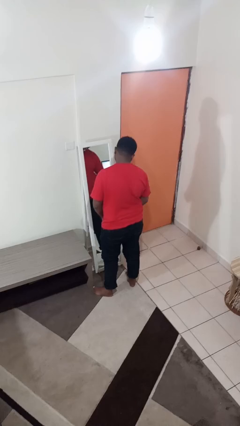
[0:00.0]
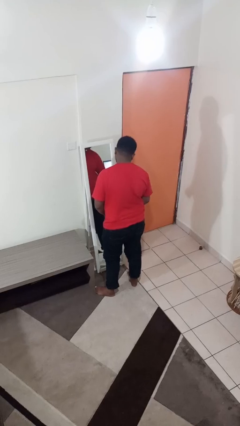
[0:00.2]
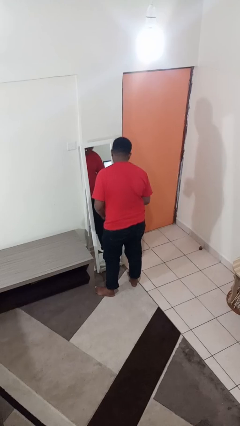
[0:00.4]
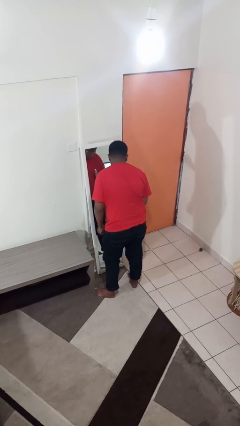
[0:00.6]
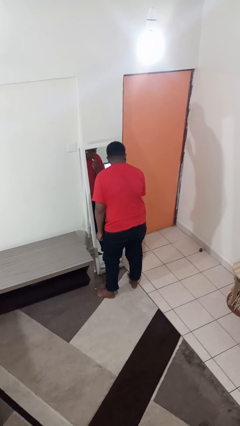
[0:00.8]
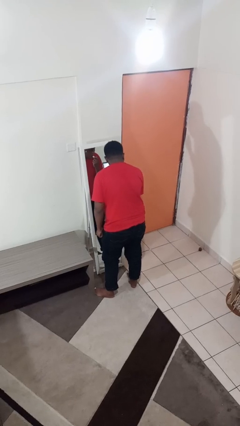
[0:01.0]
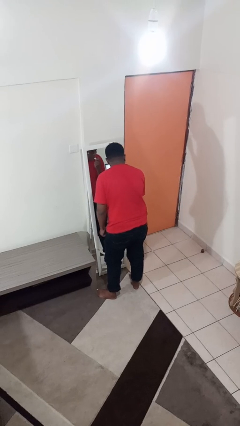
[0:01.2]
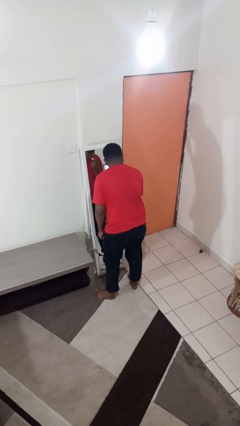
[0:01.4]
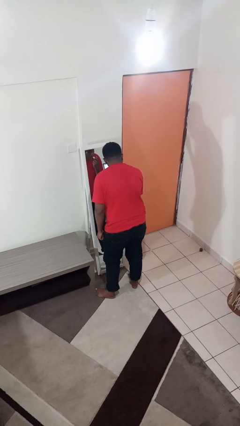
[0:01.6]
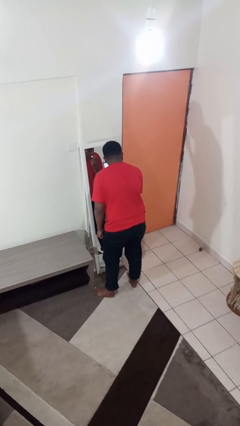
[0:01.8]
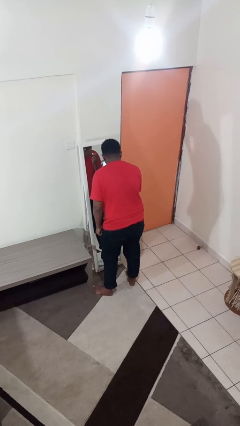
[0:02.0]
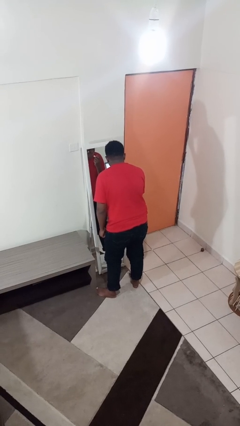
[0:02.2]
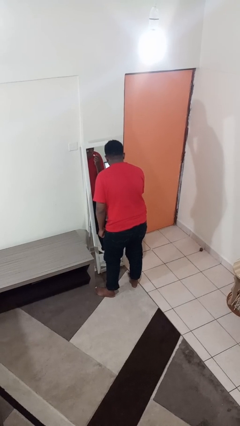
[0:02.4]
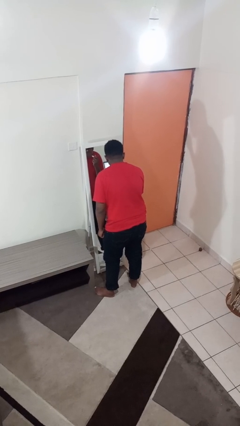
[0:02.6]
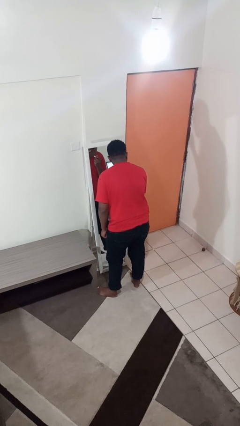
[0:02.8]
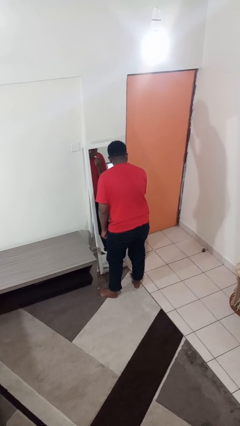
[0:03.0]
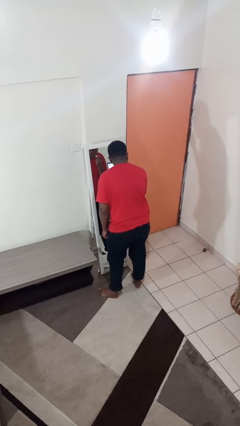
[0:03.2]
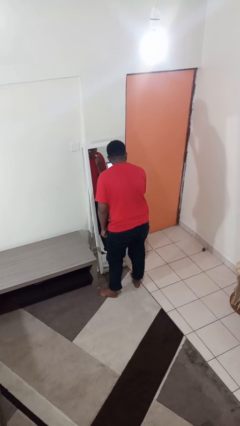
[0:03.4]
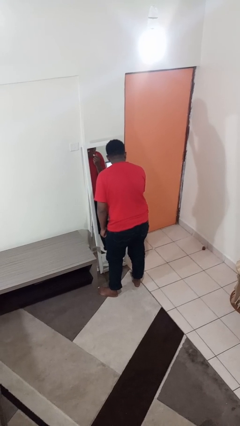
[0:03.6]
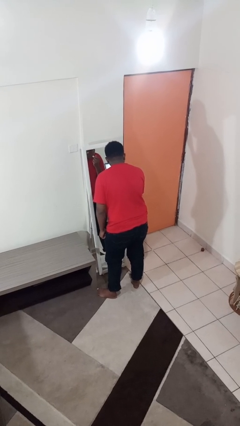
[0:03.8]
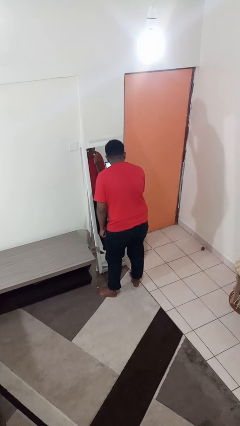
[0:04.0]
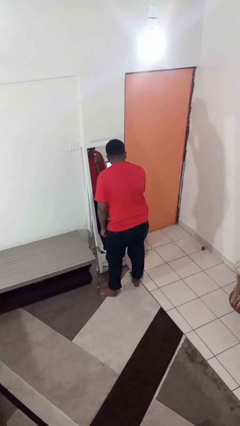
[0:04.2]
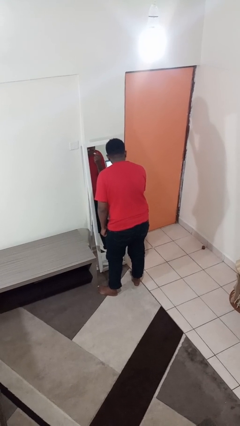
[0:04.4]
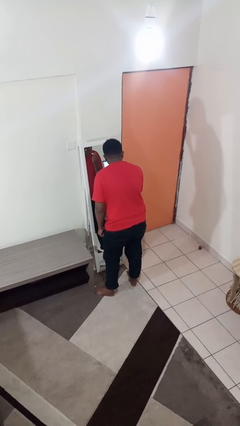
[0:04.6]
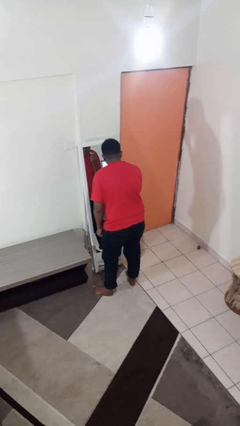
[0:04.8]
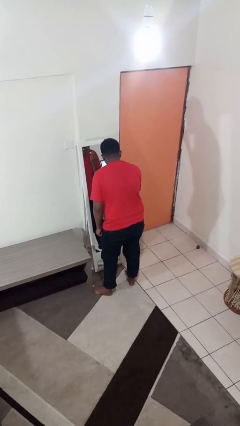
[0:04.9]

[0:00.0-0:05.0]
person applies lip makeup

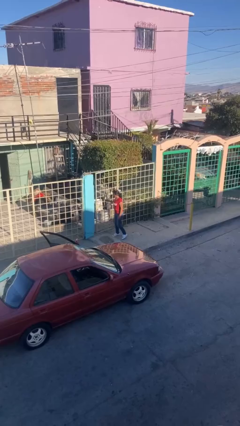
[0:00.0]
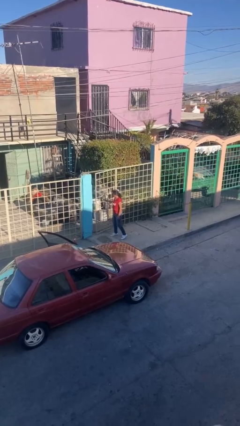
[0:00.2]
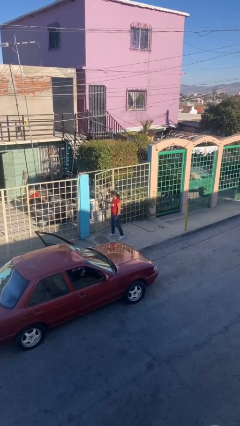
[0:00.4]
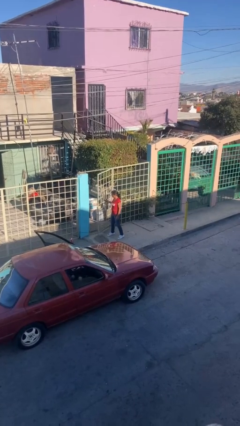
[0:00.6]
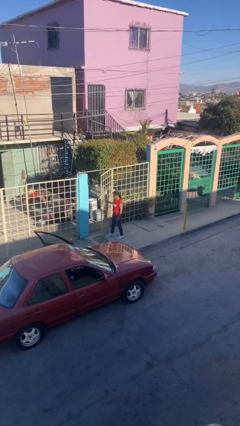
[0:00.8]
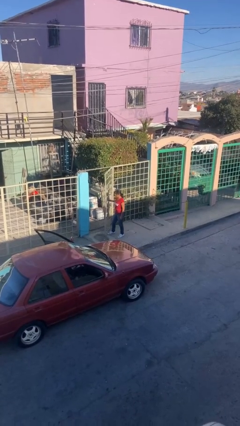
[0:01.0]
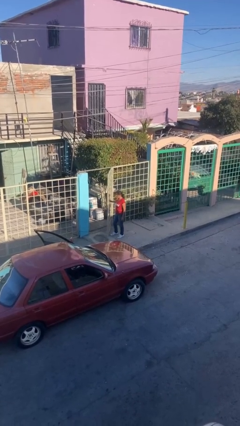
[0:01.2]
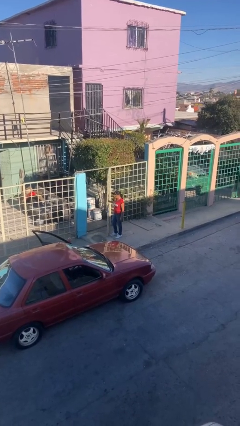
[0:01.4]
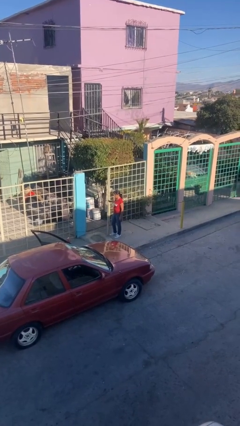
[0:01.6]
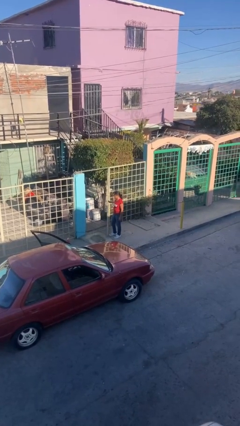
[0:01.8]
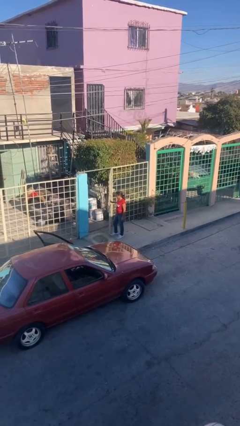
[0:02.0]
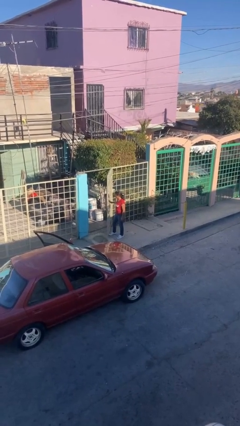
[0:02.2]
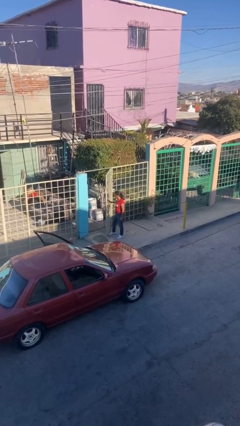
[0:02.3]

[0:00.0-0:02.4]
person opens facility door

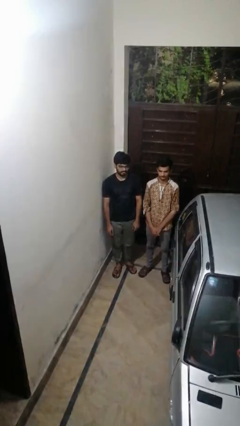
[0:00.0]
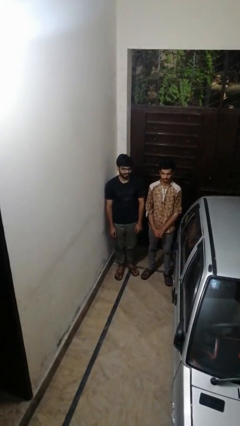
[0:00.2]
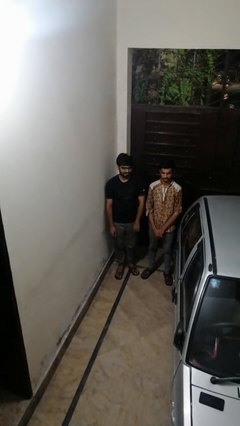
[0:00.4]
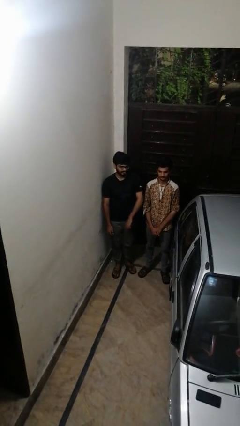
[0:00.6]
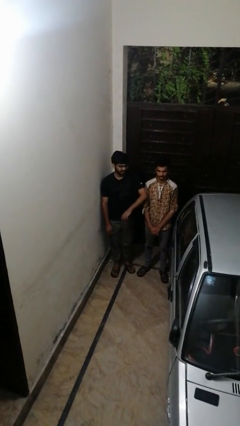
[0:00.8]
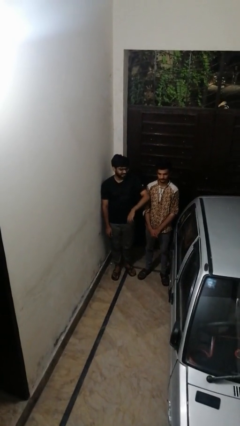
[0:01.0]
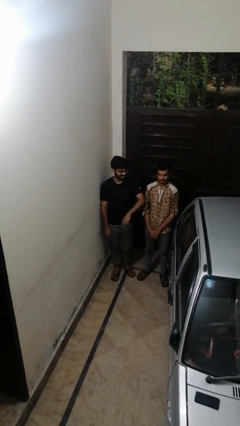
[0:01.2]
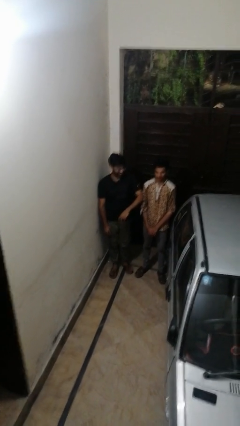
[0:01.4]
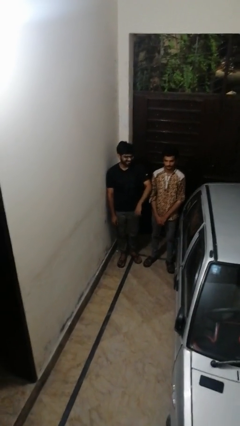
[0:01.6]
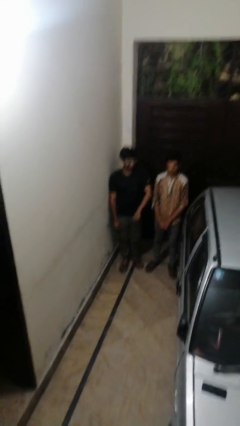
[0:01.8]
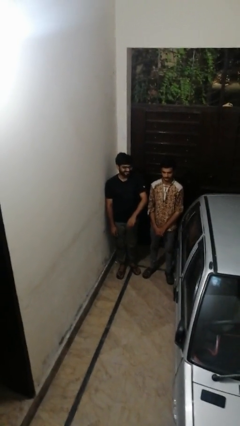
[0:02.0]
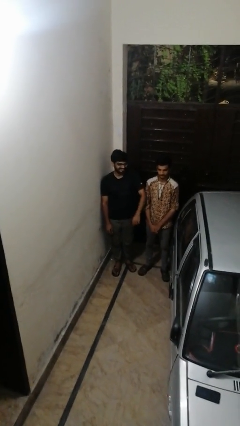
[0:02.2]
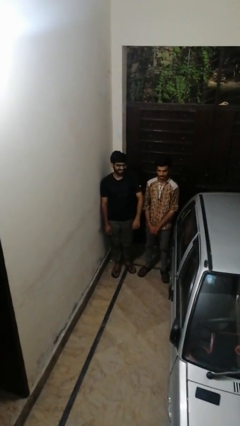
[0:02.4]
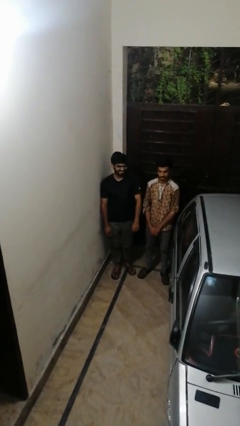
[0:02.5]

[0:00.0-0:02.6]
person nudges person with elbow

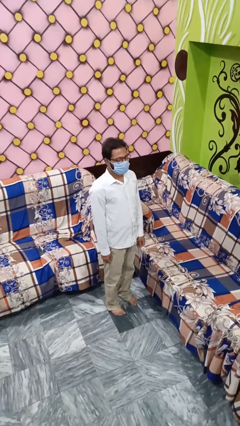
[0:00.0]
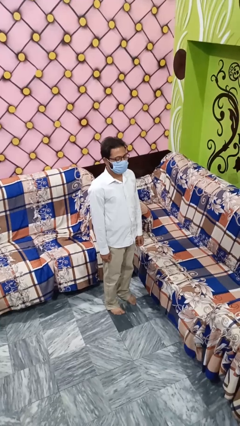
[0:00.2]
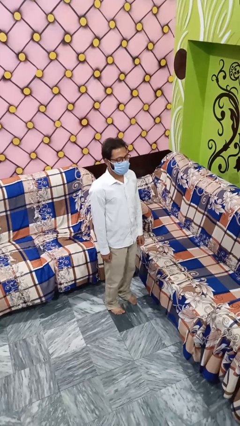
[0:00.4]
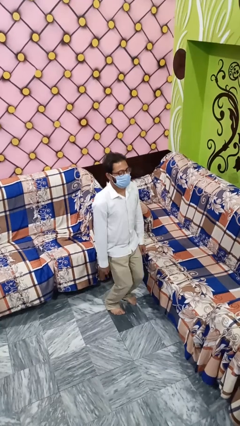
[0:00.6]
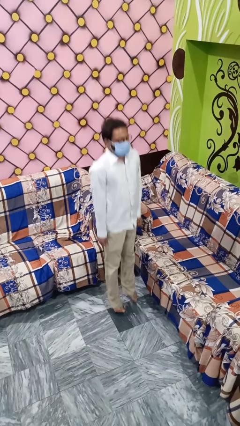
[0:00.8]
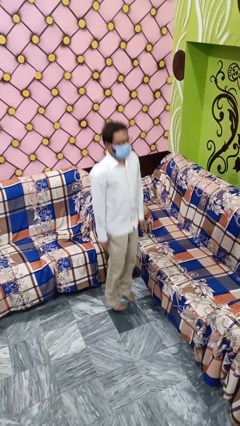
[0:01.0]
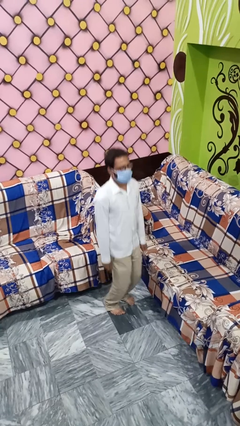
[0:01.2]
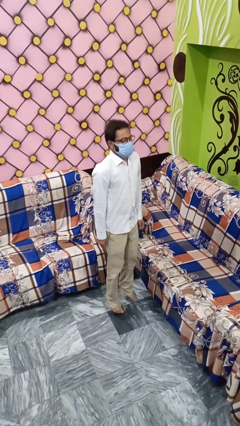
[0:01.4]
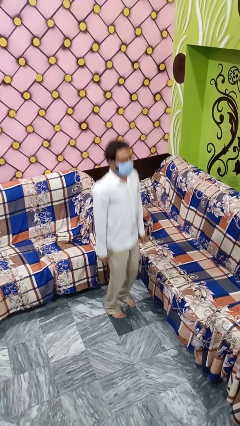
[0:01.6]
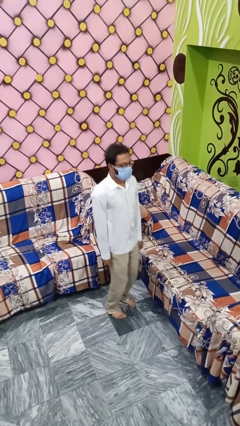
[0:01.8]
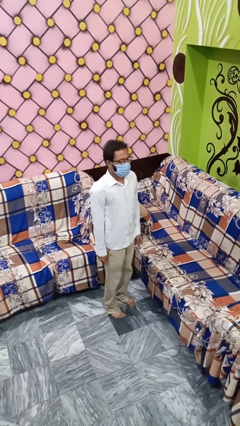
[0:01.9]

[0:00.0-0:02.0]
person jumps

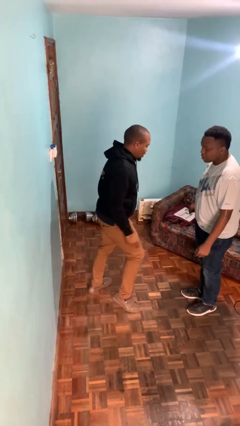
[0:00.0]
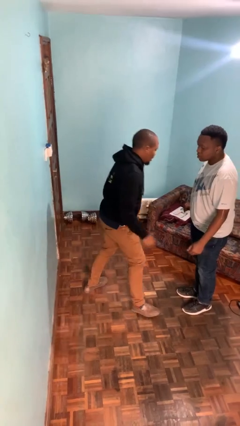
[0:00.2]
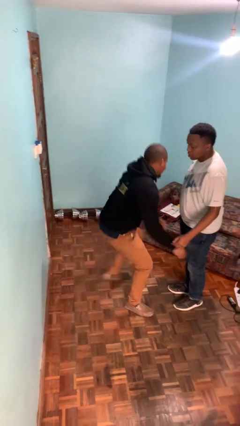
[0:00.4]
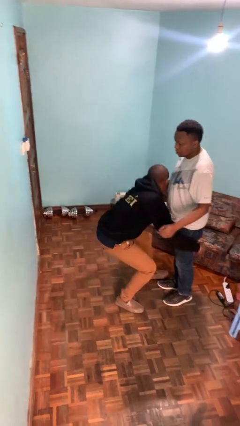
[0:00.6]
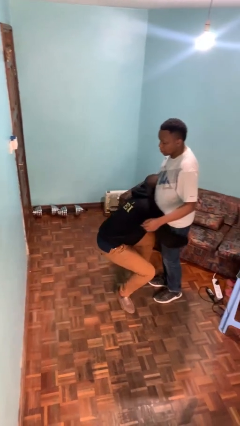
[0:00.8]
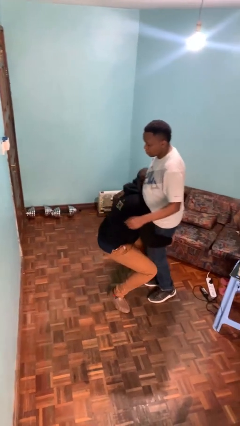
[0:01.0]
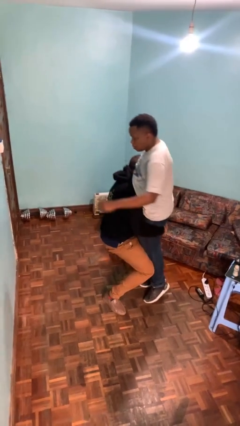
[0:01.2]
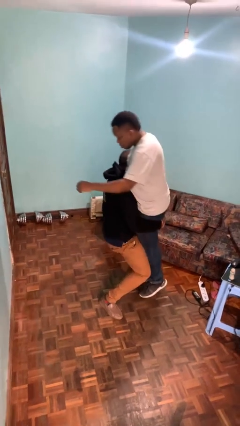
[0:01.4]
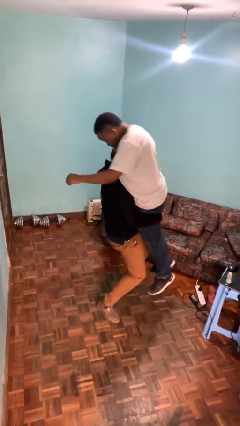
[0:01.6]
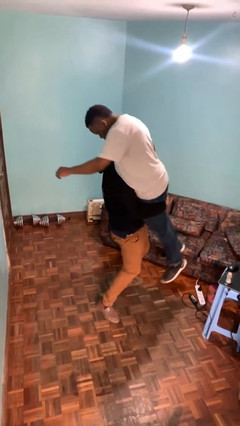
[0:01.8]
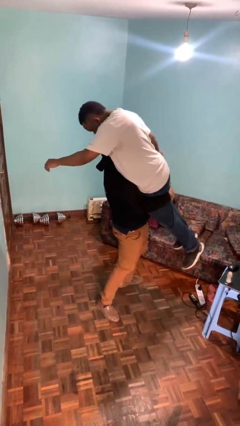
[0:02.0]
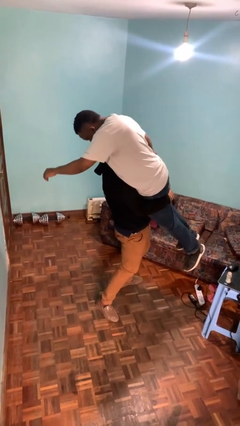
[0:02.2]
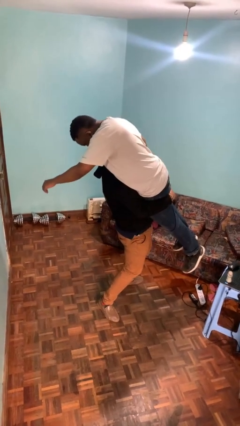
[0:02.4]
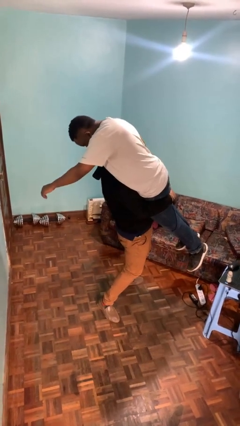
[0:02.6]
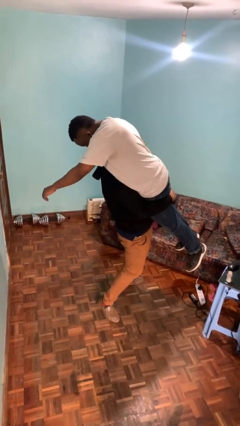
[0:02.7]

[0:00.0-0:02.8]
person carries person over shoulder

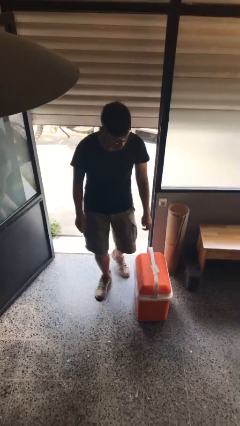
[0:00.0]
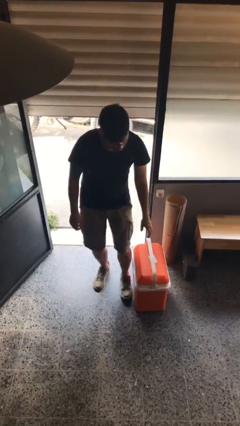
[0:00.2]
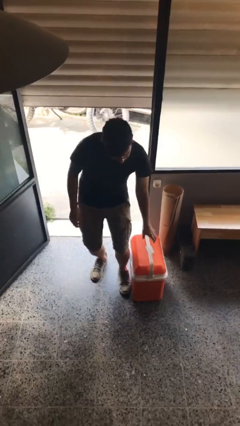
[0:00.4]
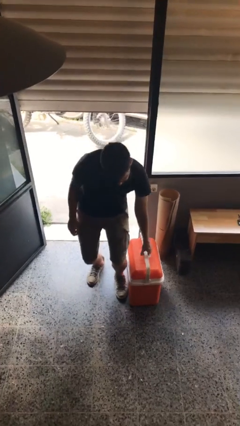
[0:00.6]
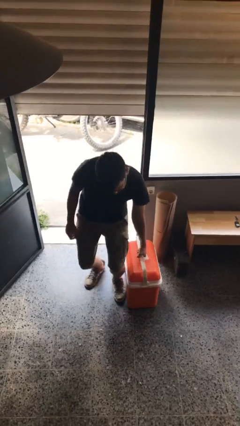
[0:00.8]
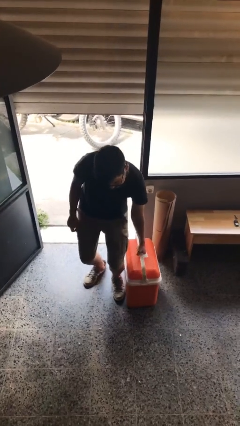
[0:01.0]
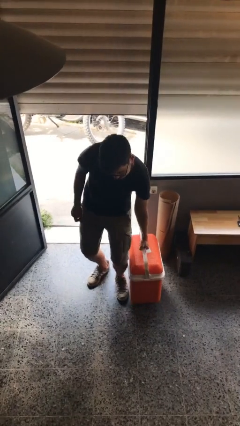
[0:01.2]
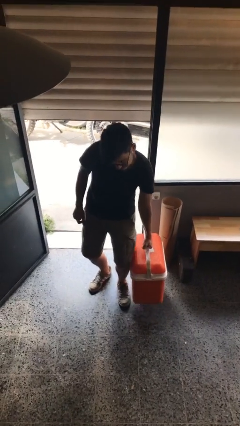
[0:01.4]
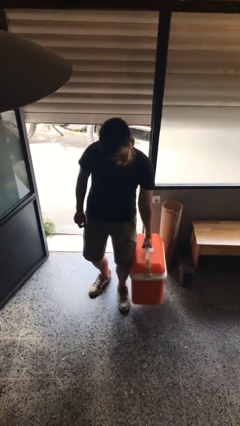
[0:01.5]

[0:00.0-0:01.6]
person picks up object from floor

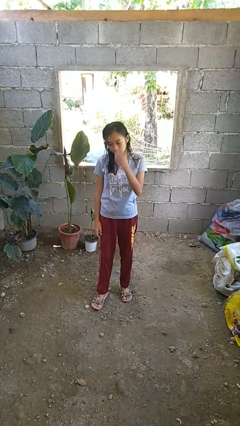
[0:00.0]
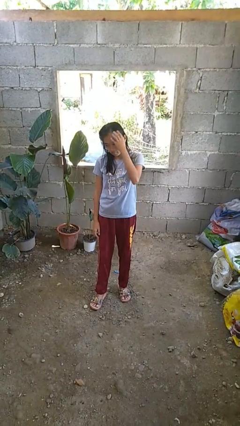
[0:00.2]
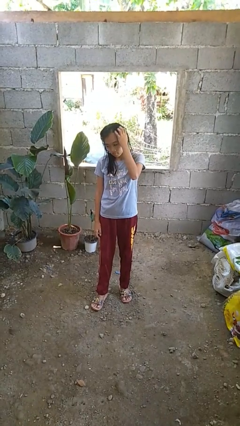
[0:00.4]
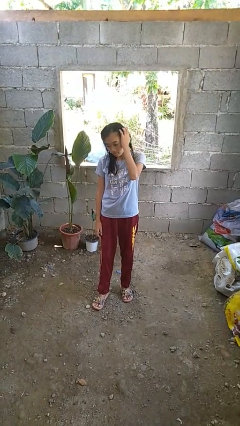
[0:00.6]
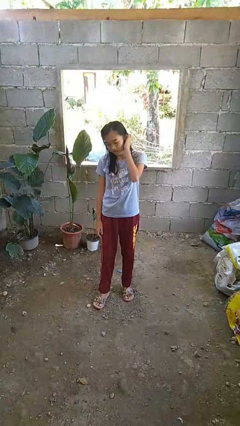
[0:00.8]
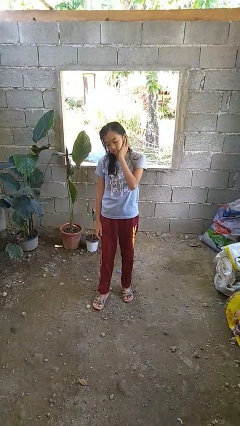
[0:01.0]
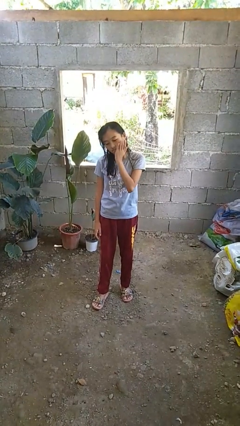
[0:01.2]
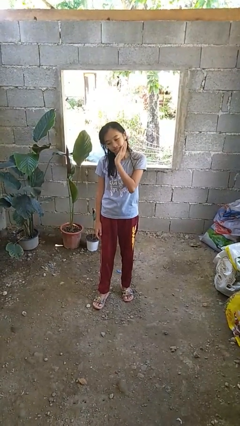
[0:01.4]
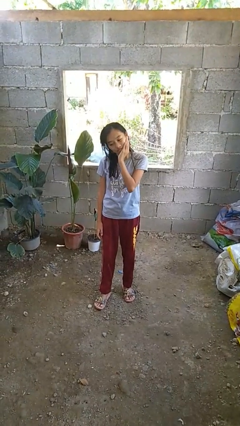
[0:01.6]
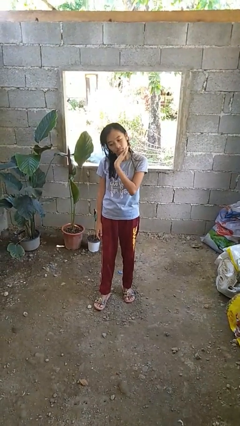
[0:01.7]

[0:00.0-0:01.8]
person scratches face
